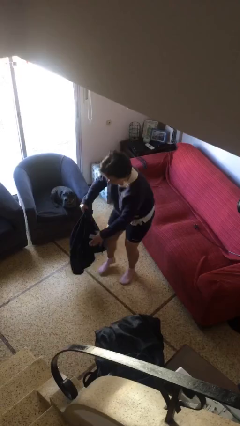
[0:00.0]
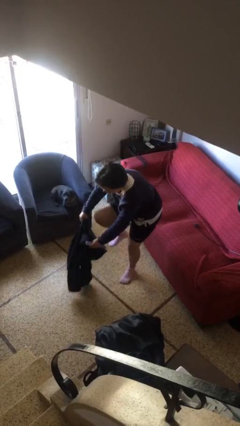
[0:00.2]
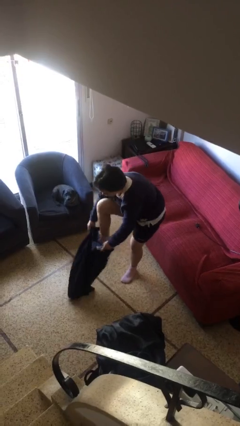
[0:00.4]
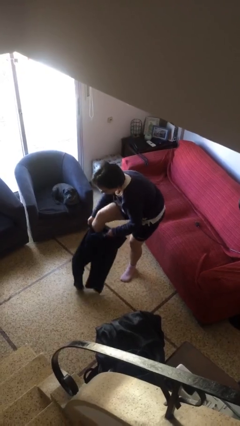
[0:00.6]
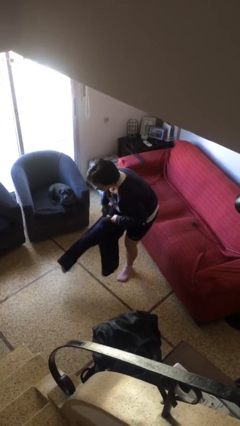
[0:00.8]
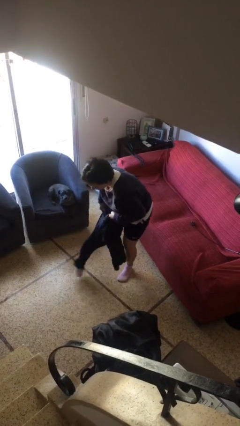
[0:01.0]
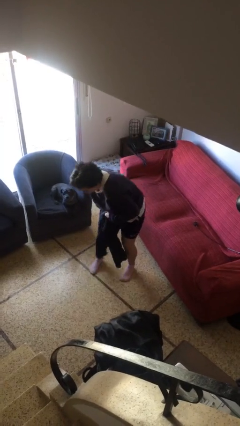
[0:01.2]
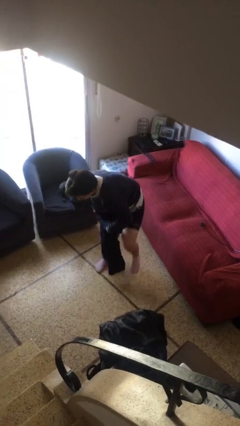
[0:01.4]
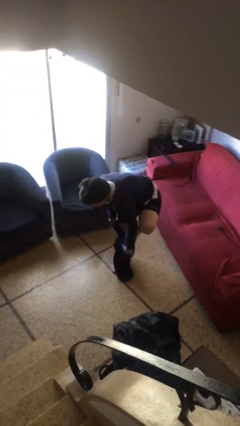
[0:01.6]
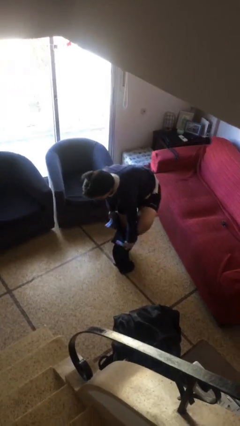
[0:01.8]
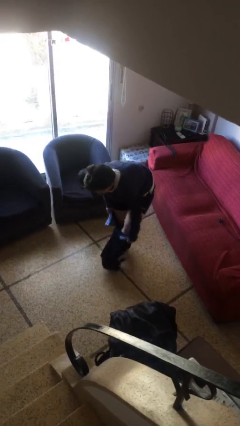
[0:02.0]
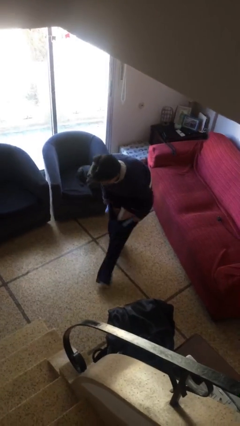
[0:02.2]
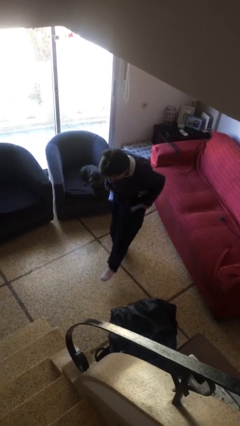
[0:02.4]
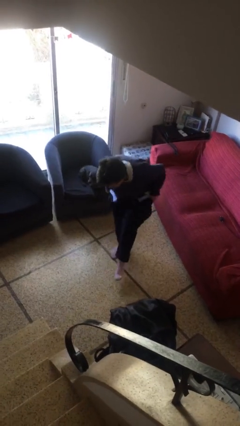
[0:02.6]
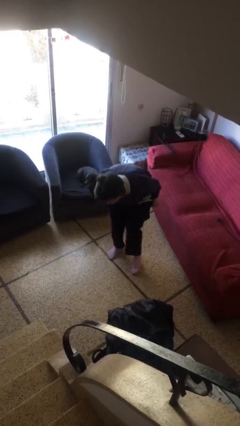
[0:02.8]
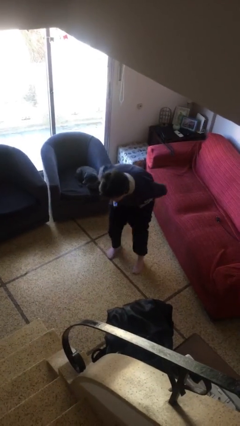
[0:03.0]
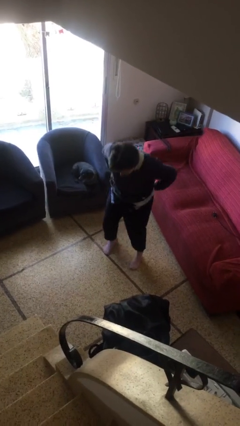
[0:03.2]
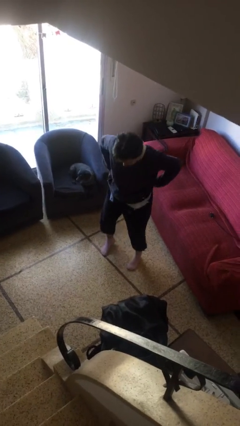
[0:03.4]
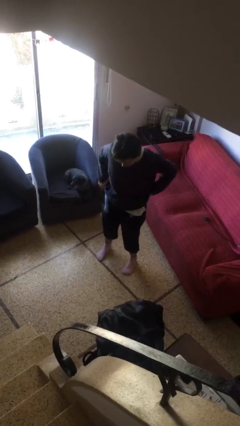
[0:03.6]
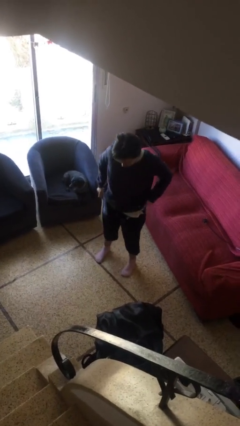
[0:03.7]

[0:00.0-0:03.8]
person puts on pants

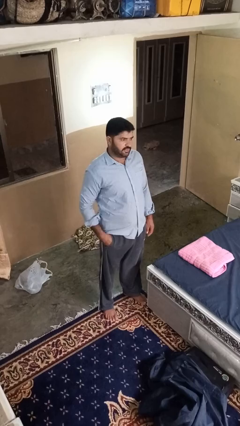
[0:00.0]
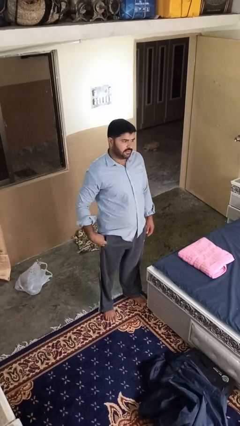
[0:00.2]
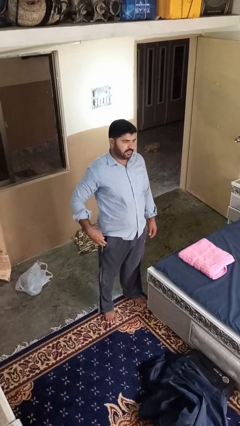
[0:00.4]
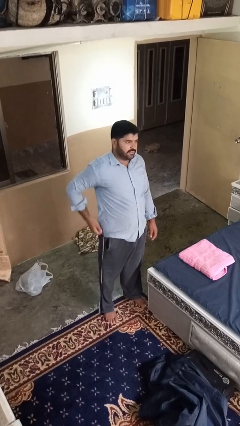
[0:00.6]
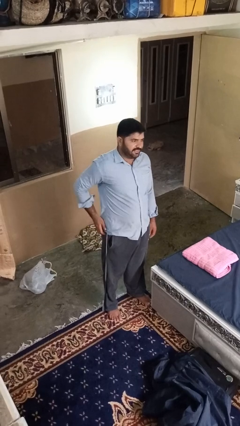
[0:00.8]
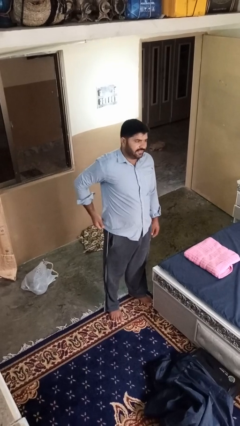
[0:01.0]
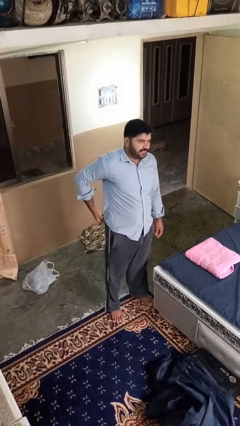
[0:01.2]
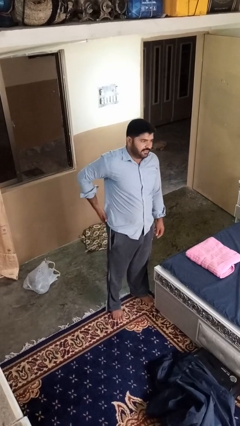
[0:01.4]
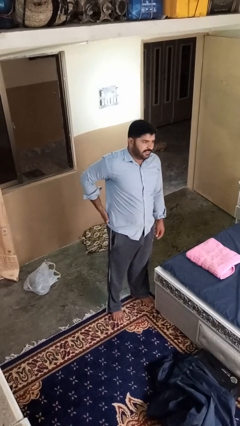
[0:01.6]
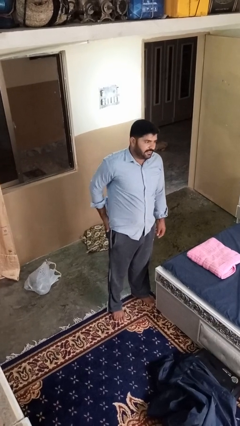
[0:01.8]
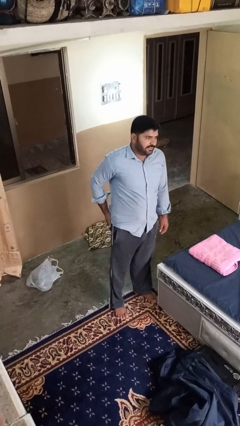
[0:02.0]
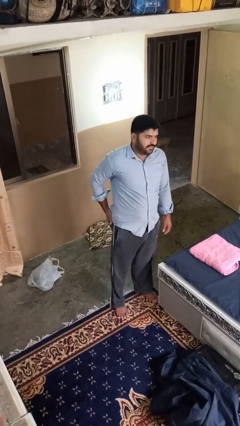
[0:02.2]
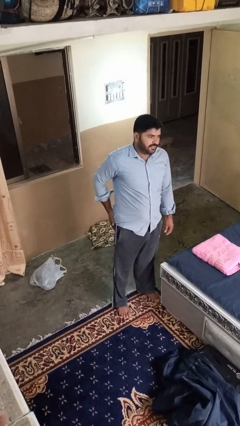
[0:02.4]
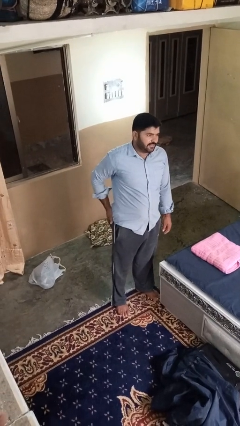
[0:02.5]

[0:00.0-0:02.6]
person puts hands in back pockets

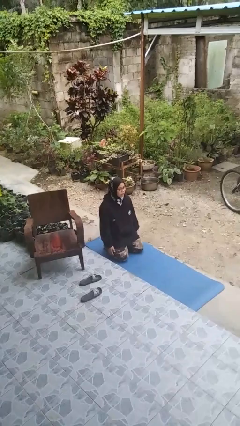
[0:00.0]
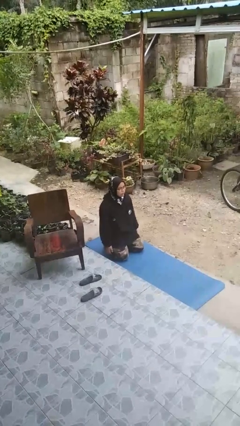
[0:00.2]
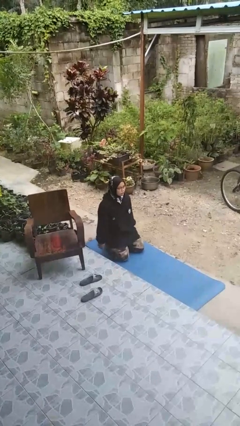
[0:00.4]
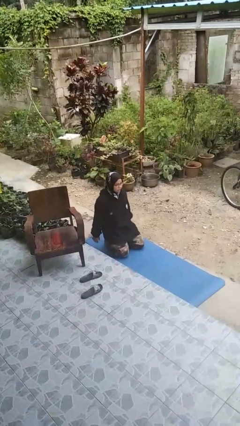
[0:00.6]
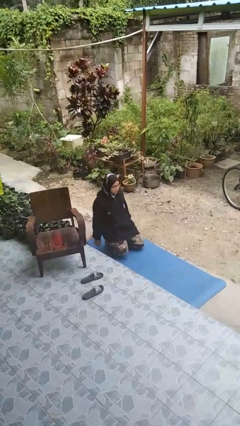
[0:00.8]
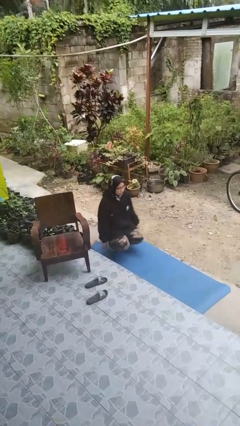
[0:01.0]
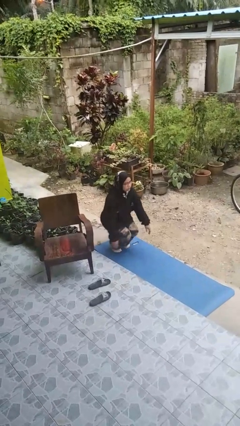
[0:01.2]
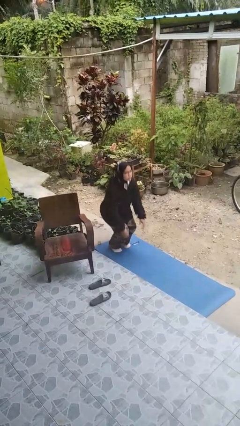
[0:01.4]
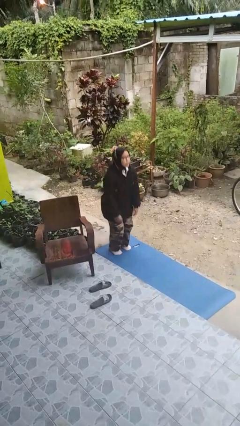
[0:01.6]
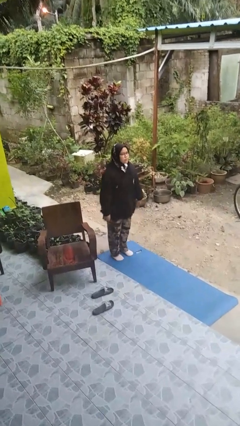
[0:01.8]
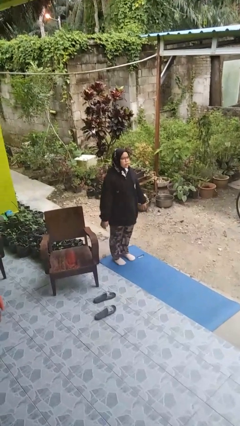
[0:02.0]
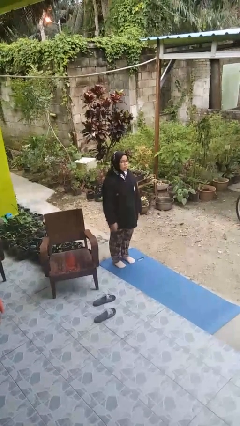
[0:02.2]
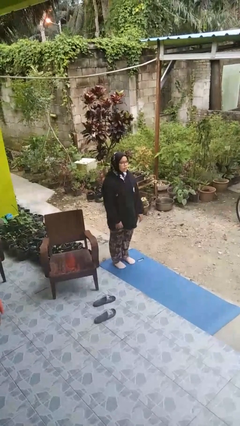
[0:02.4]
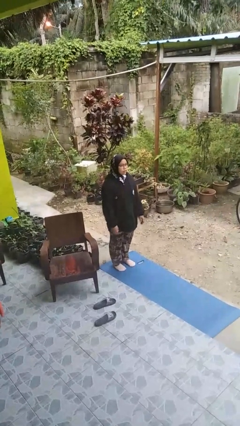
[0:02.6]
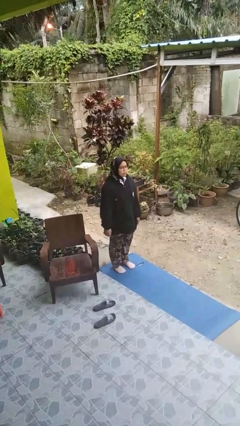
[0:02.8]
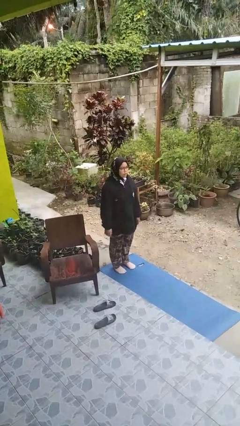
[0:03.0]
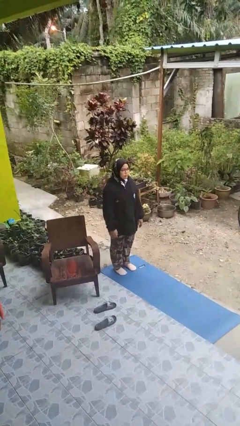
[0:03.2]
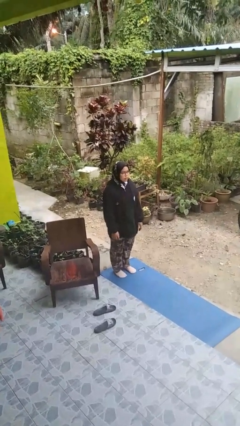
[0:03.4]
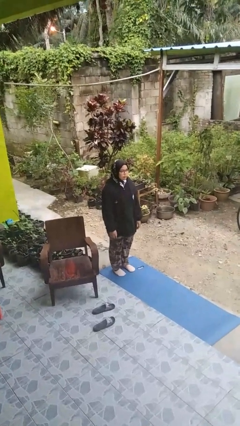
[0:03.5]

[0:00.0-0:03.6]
person stands up from floor

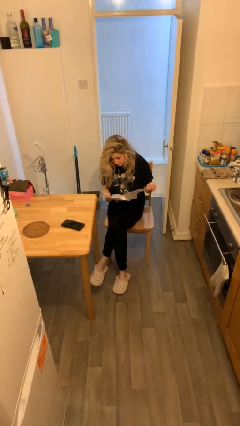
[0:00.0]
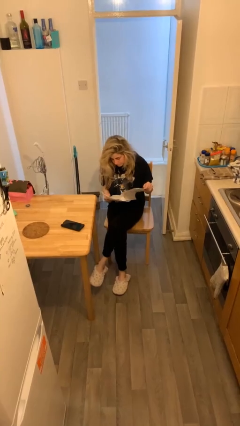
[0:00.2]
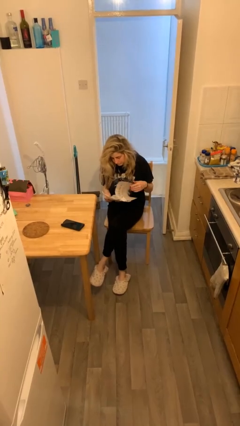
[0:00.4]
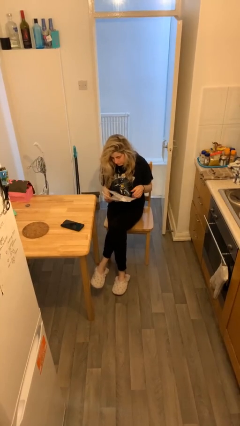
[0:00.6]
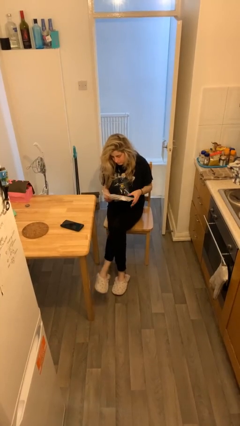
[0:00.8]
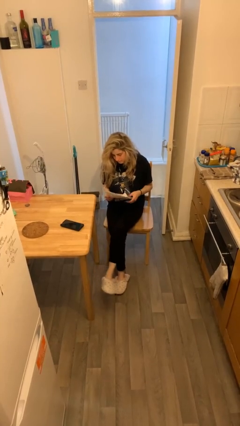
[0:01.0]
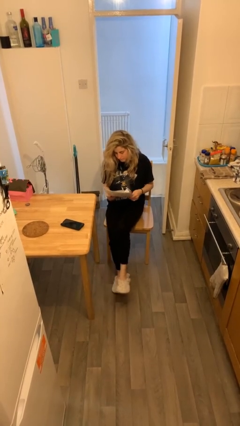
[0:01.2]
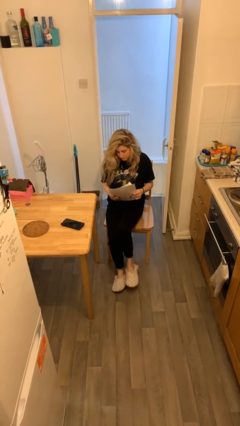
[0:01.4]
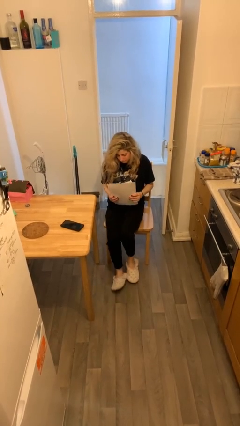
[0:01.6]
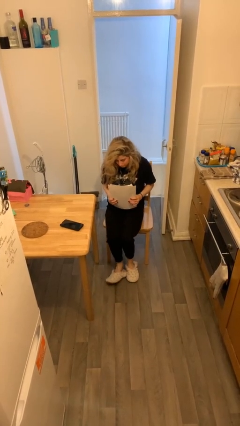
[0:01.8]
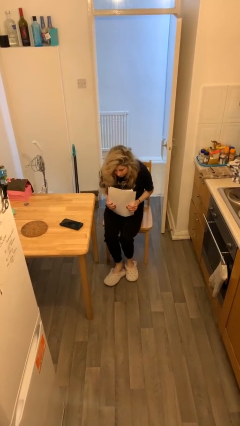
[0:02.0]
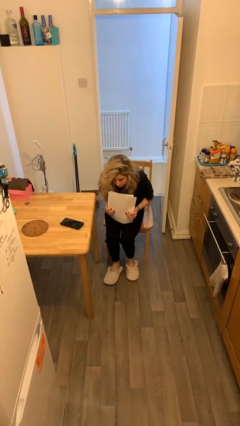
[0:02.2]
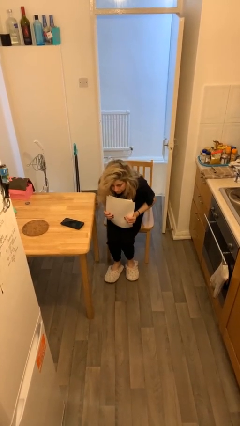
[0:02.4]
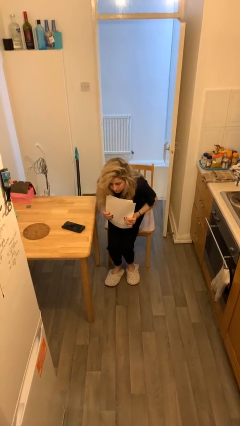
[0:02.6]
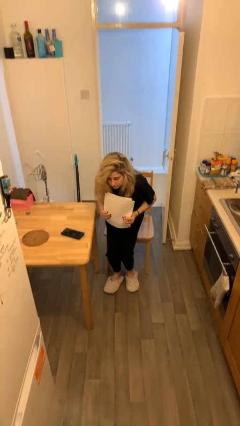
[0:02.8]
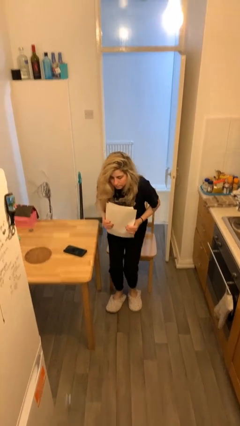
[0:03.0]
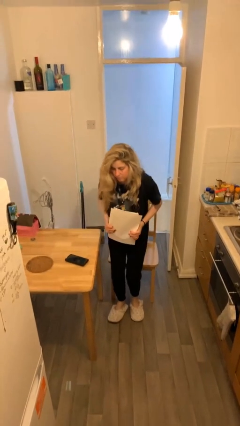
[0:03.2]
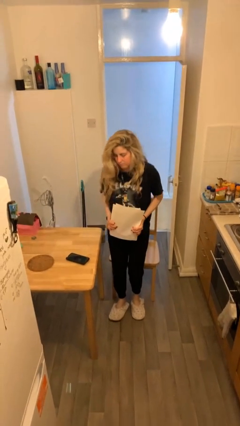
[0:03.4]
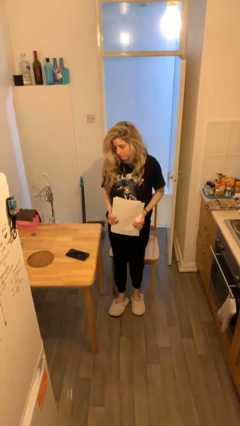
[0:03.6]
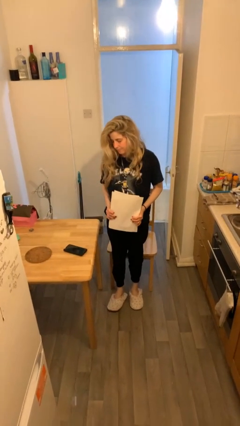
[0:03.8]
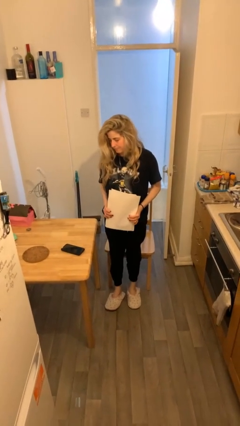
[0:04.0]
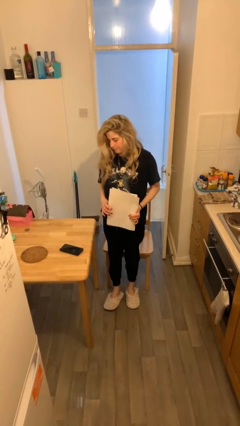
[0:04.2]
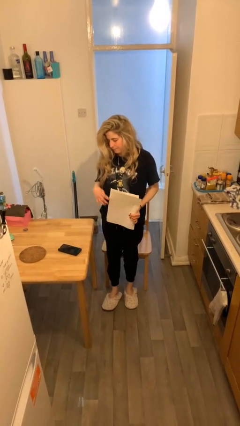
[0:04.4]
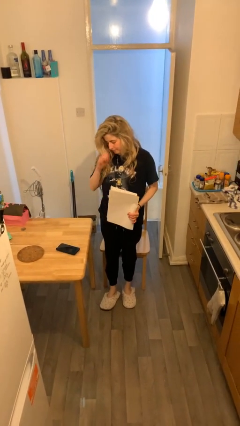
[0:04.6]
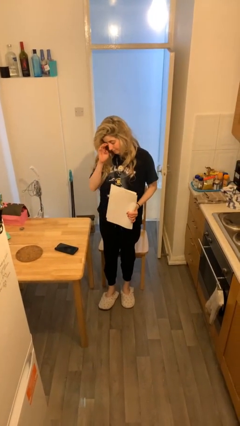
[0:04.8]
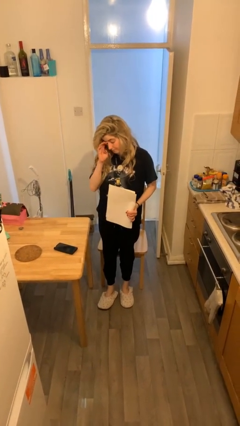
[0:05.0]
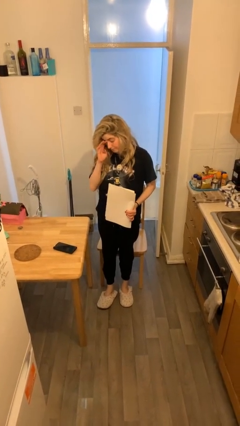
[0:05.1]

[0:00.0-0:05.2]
person stands up

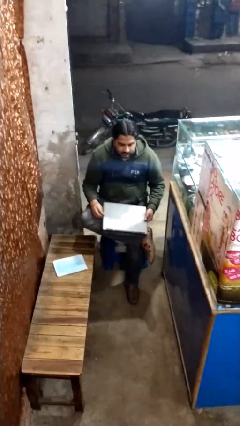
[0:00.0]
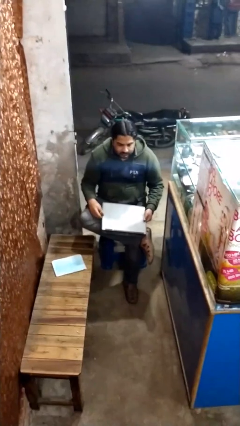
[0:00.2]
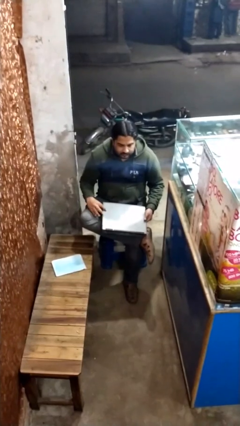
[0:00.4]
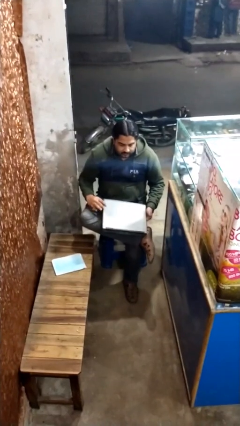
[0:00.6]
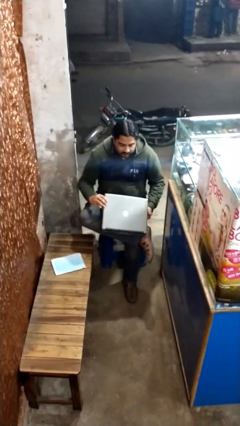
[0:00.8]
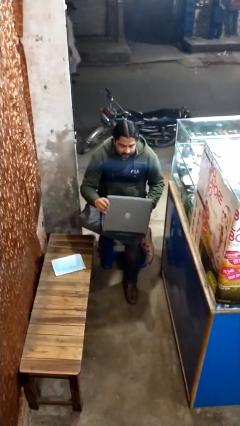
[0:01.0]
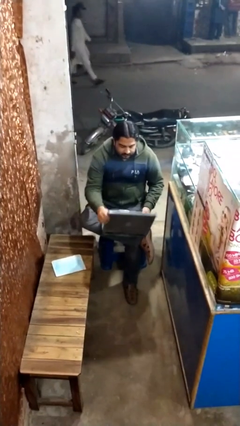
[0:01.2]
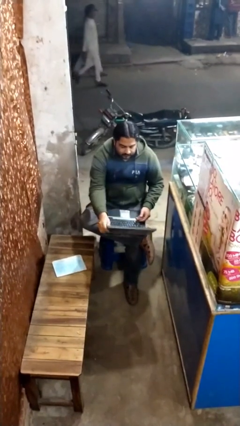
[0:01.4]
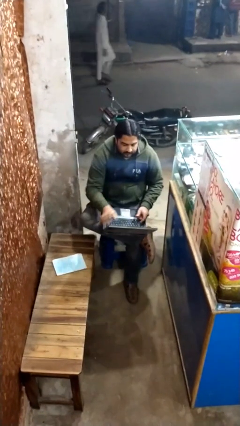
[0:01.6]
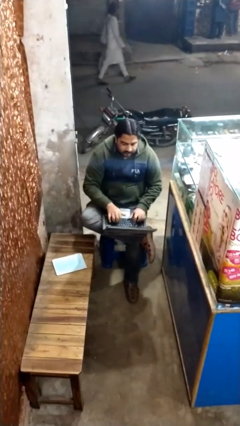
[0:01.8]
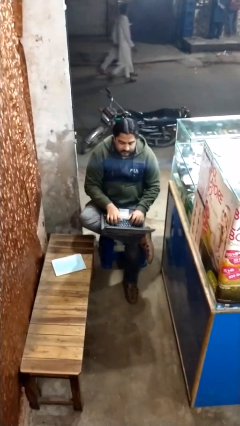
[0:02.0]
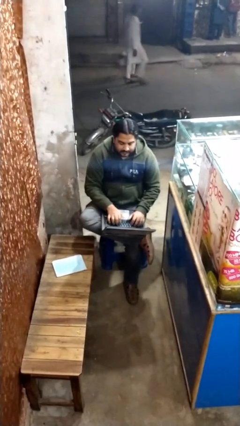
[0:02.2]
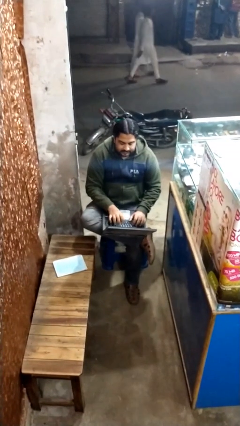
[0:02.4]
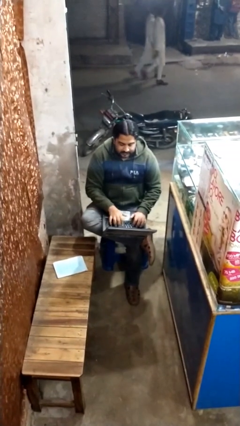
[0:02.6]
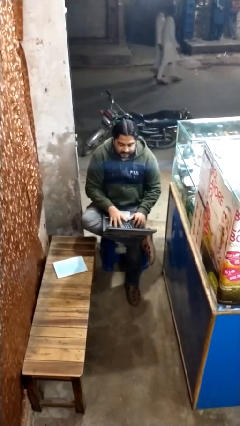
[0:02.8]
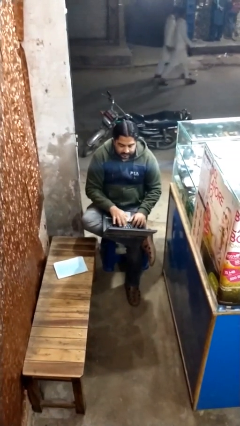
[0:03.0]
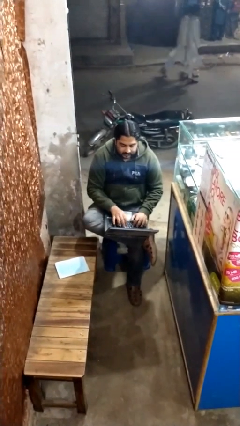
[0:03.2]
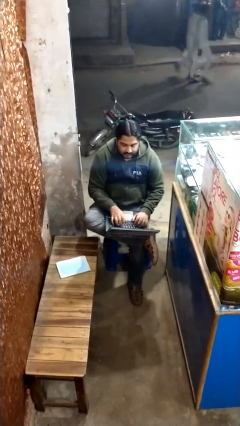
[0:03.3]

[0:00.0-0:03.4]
person interacts with laptop
